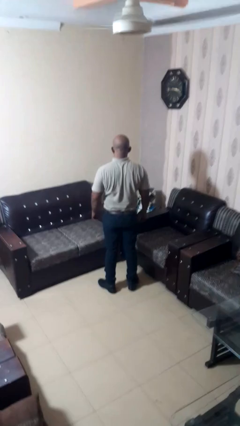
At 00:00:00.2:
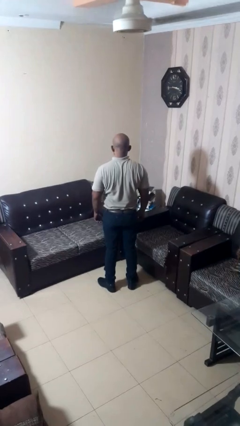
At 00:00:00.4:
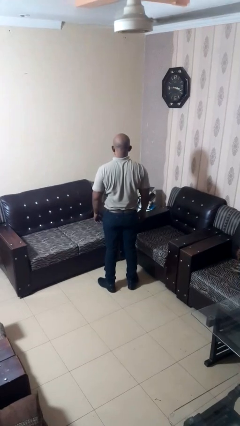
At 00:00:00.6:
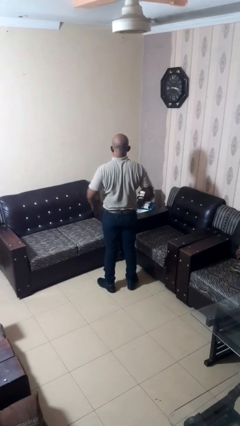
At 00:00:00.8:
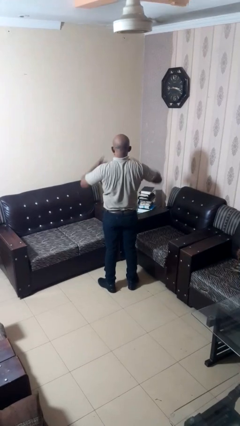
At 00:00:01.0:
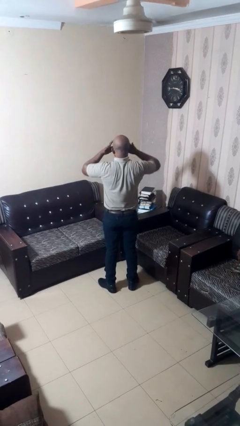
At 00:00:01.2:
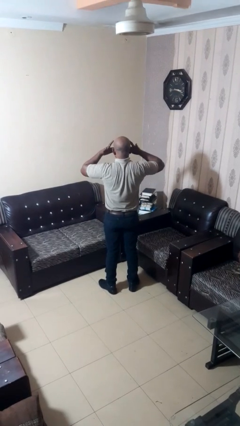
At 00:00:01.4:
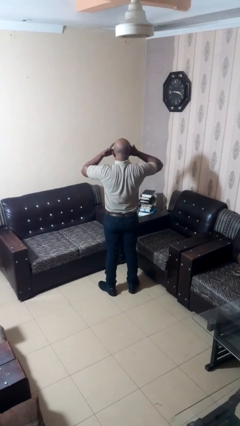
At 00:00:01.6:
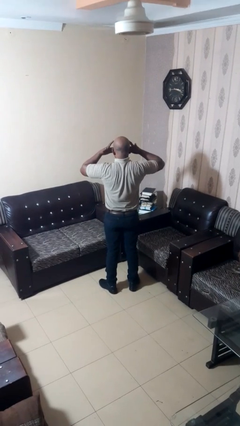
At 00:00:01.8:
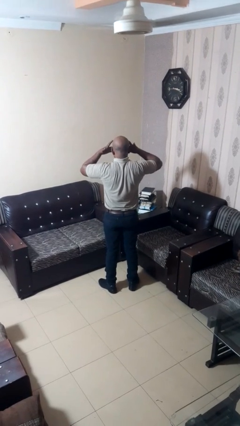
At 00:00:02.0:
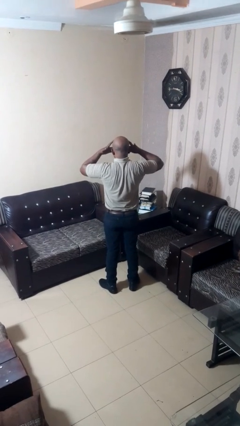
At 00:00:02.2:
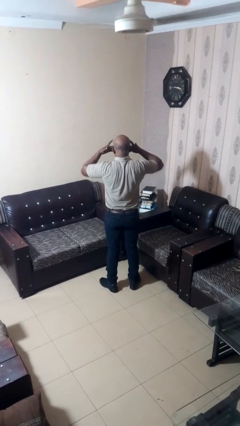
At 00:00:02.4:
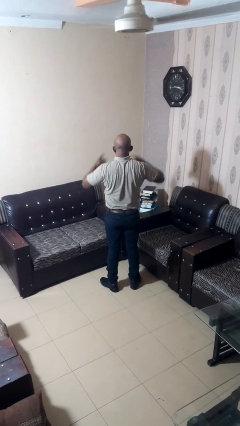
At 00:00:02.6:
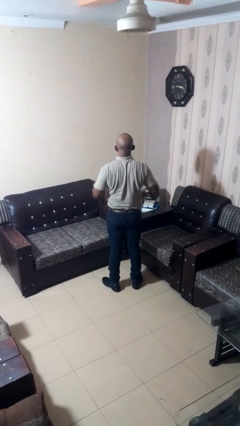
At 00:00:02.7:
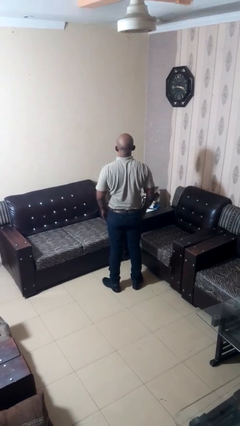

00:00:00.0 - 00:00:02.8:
person rubs eyes

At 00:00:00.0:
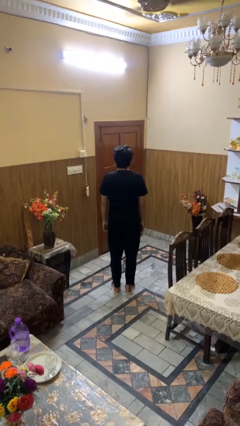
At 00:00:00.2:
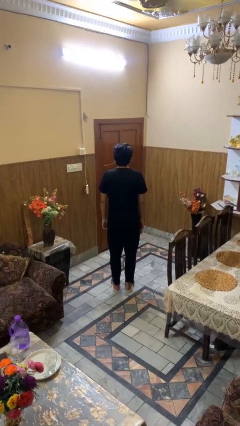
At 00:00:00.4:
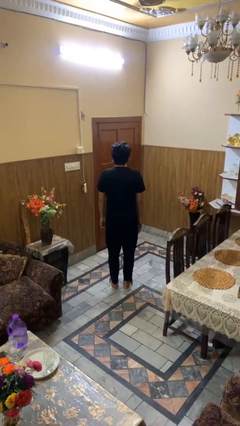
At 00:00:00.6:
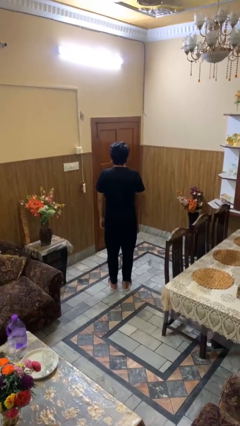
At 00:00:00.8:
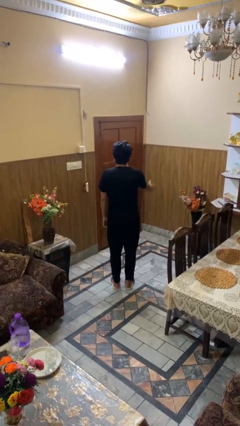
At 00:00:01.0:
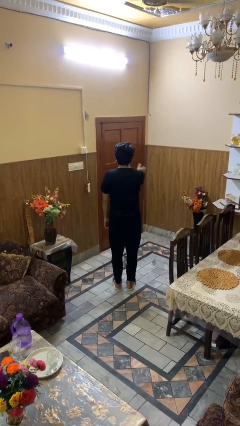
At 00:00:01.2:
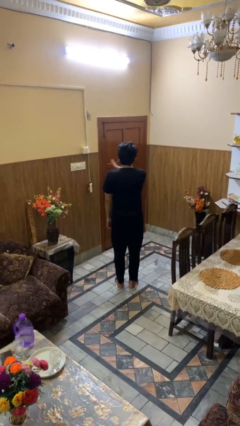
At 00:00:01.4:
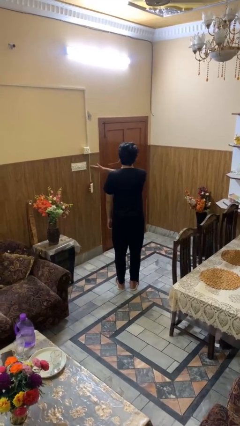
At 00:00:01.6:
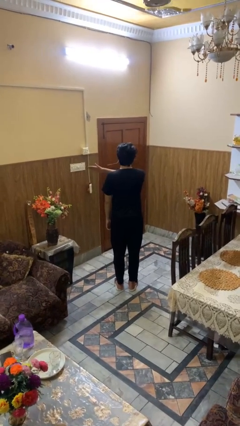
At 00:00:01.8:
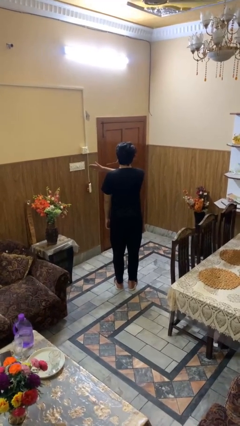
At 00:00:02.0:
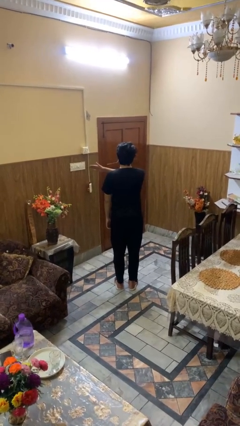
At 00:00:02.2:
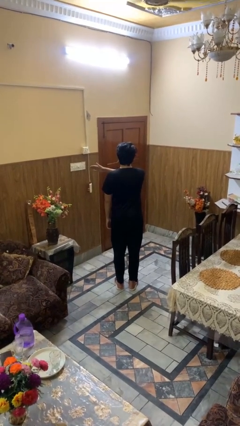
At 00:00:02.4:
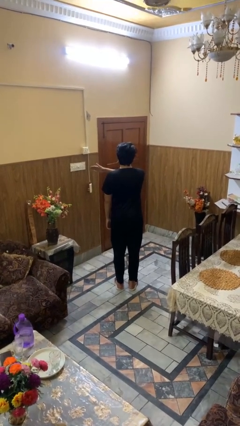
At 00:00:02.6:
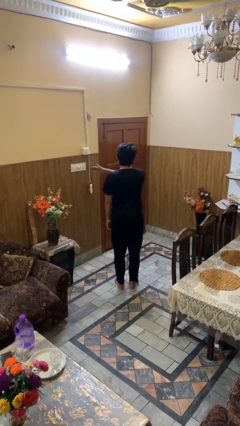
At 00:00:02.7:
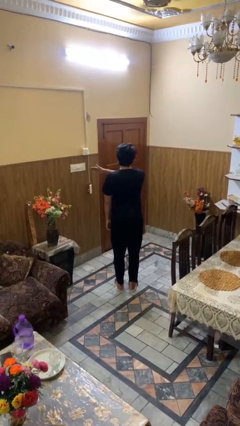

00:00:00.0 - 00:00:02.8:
person gestures swipe left

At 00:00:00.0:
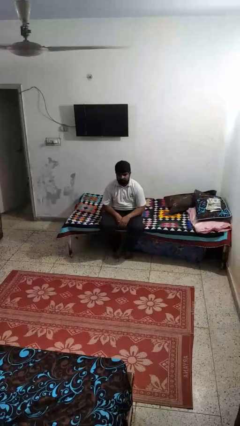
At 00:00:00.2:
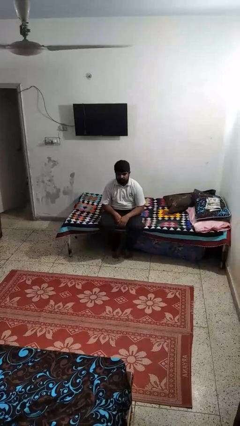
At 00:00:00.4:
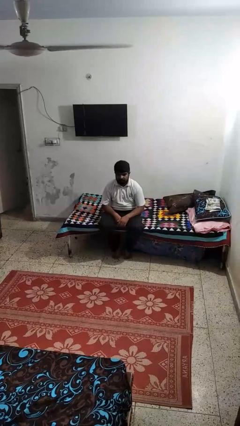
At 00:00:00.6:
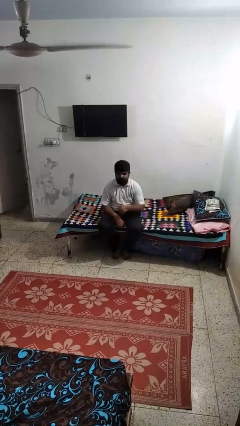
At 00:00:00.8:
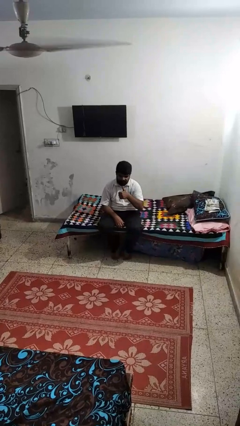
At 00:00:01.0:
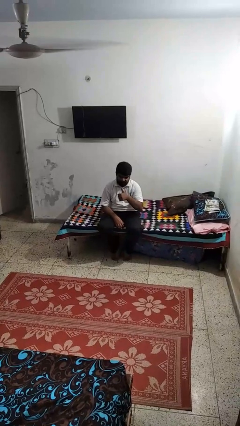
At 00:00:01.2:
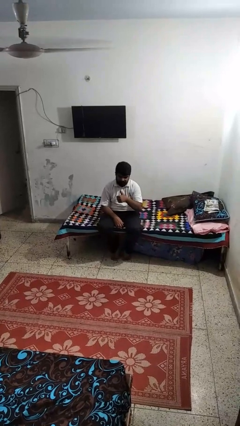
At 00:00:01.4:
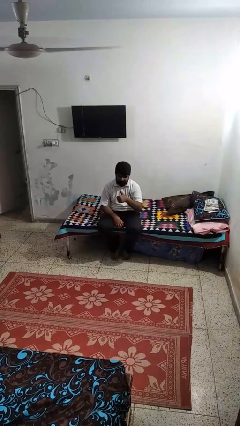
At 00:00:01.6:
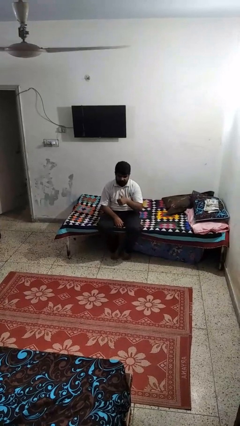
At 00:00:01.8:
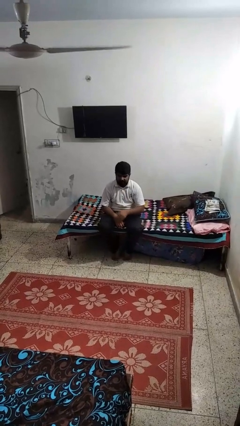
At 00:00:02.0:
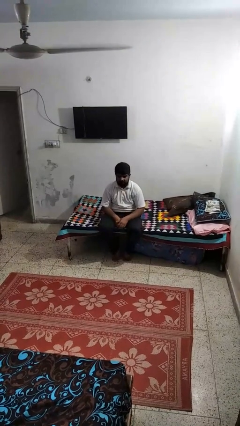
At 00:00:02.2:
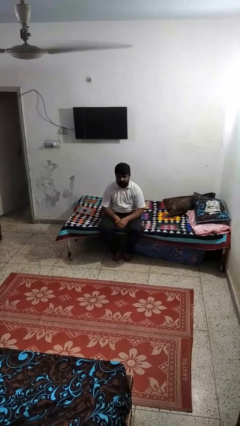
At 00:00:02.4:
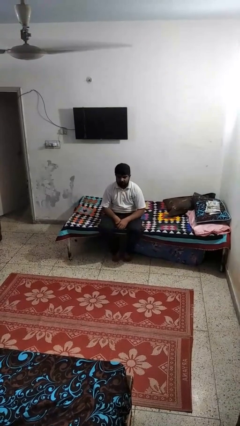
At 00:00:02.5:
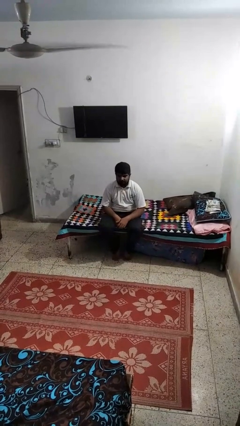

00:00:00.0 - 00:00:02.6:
person gestures thumbs up

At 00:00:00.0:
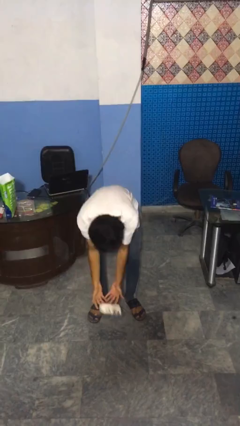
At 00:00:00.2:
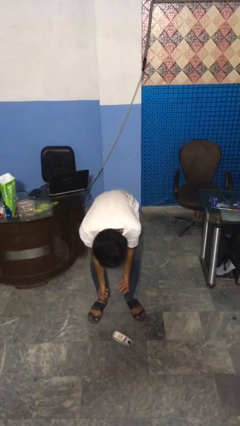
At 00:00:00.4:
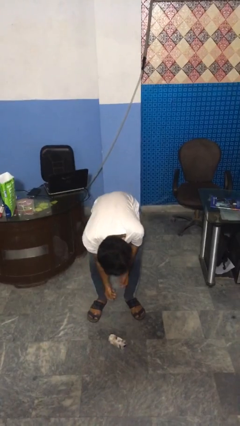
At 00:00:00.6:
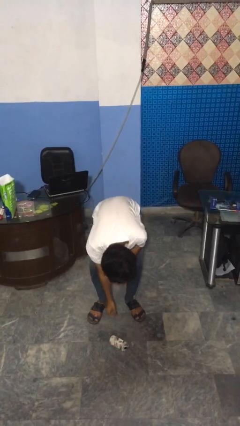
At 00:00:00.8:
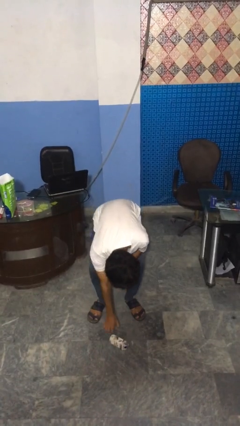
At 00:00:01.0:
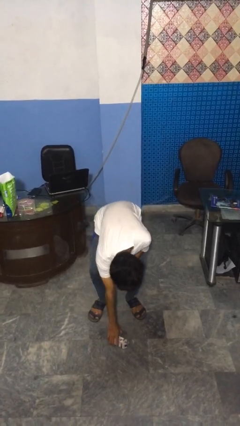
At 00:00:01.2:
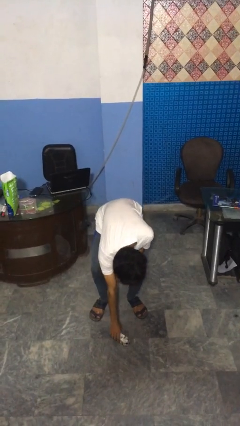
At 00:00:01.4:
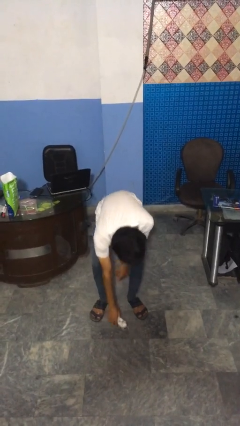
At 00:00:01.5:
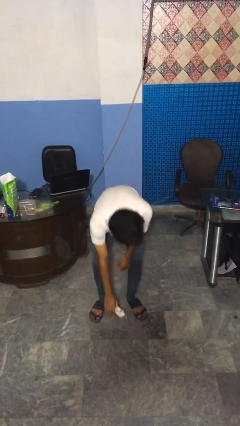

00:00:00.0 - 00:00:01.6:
person catches dropped object

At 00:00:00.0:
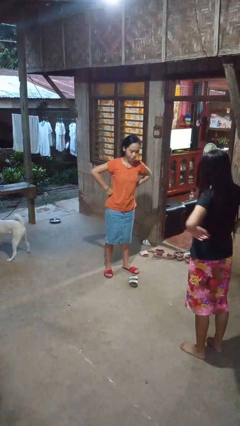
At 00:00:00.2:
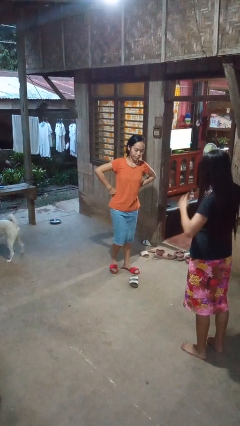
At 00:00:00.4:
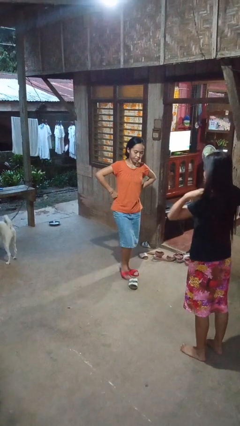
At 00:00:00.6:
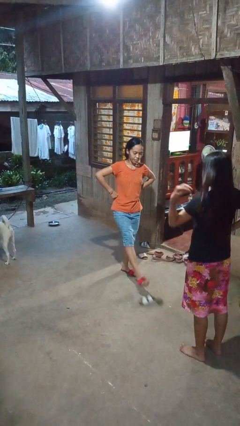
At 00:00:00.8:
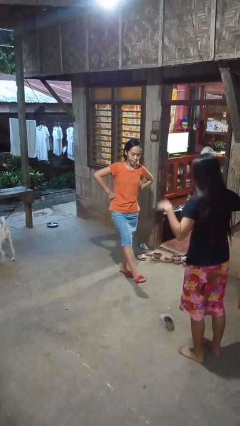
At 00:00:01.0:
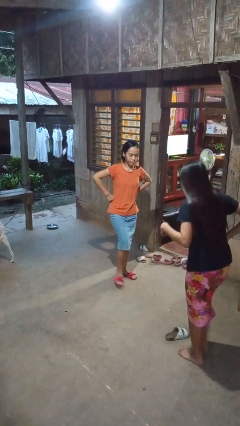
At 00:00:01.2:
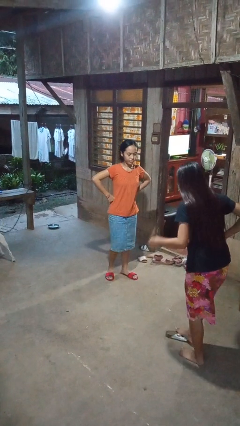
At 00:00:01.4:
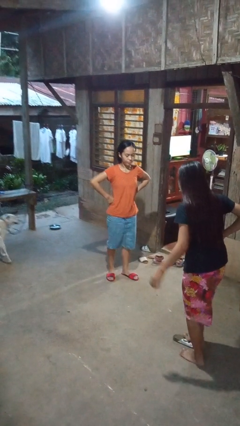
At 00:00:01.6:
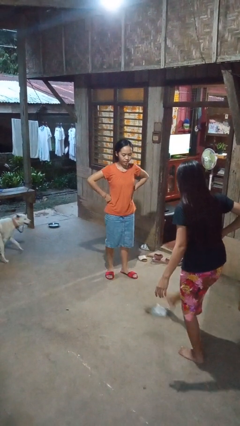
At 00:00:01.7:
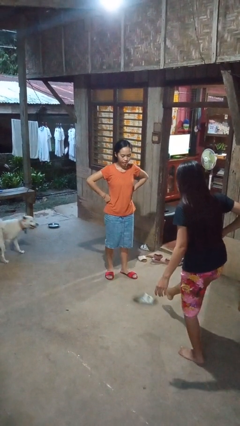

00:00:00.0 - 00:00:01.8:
person kicks object to person

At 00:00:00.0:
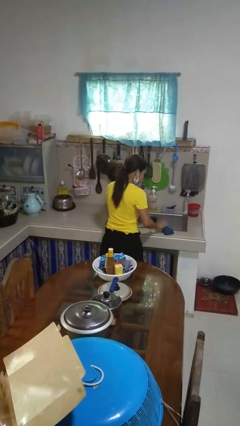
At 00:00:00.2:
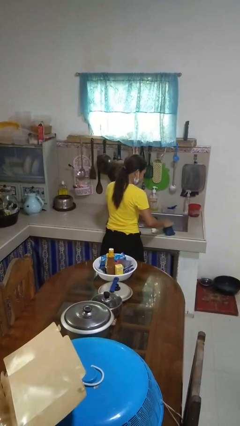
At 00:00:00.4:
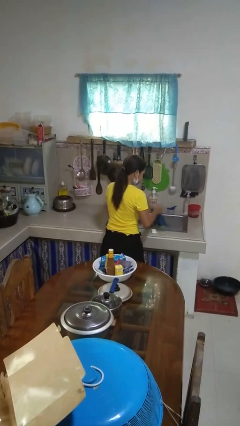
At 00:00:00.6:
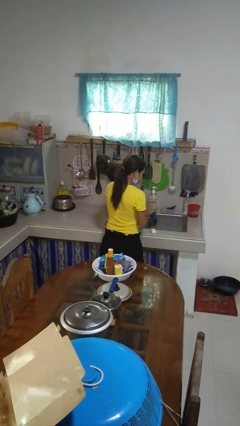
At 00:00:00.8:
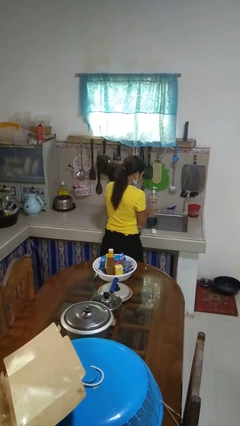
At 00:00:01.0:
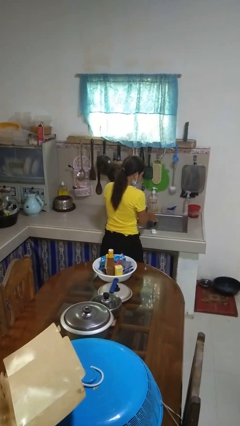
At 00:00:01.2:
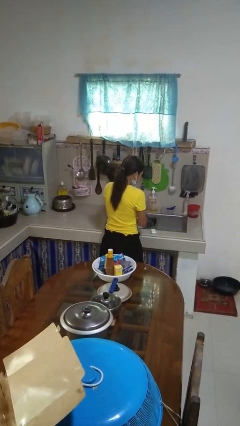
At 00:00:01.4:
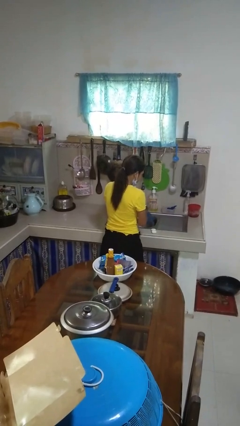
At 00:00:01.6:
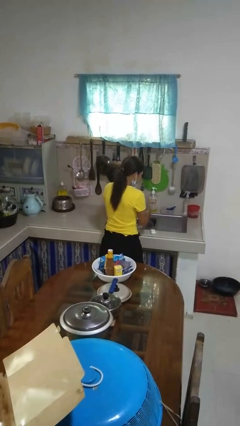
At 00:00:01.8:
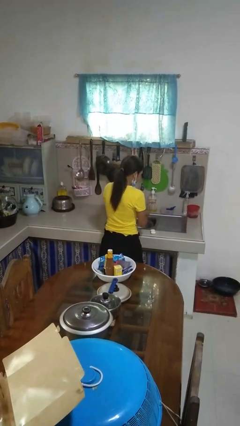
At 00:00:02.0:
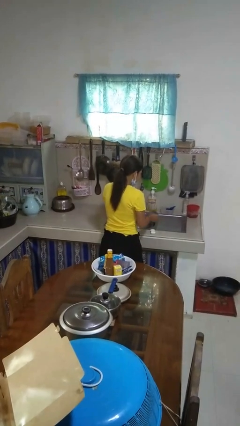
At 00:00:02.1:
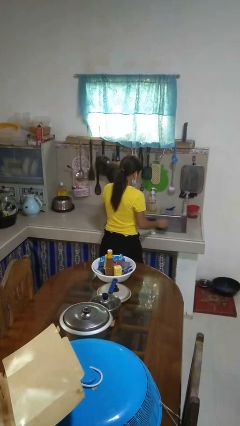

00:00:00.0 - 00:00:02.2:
person dries hands with towel

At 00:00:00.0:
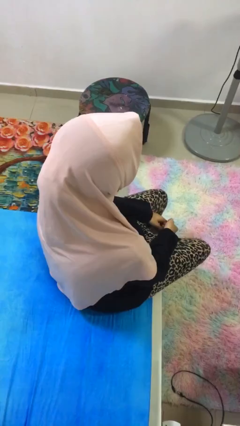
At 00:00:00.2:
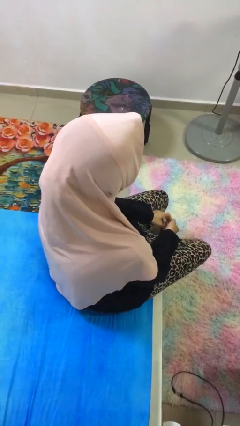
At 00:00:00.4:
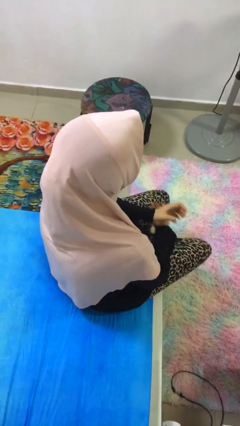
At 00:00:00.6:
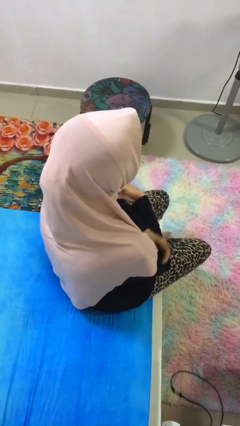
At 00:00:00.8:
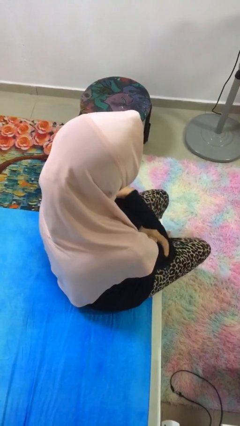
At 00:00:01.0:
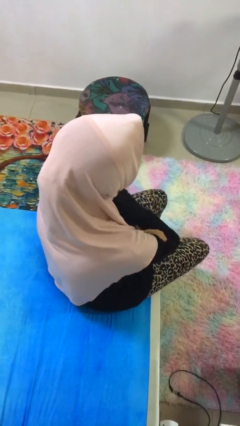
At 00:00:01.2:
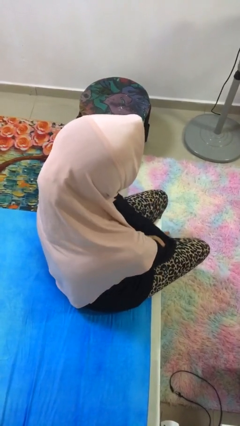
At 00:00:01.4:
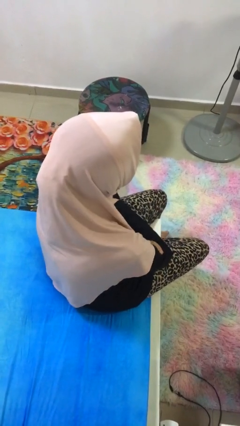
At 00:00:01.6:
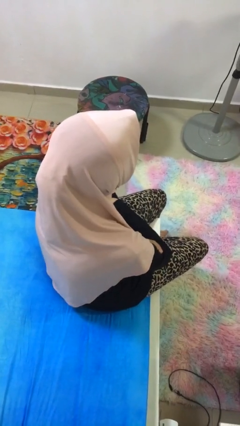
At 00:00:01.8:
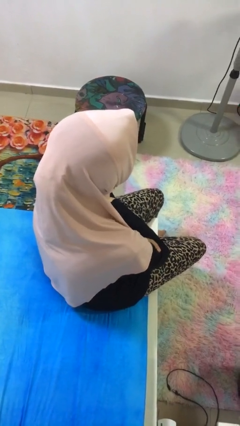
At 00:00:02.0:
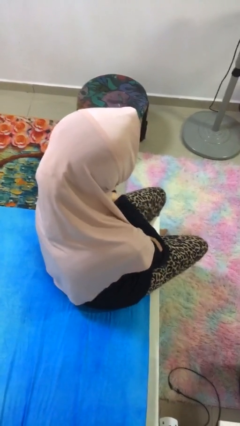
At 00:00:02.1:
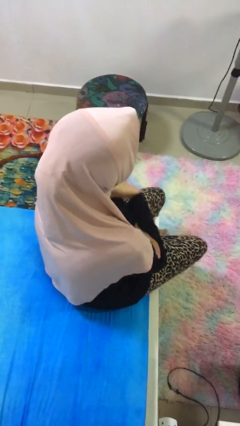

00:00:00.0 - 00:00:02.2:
person crosses arms

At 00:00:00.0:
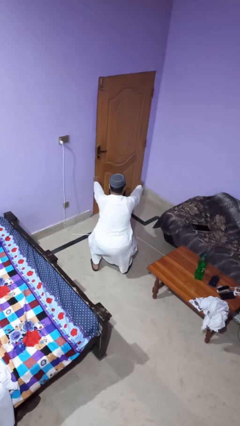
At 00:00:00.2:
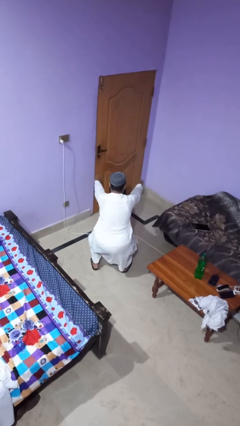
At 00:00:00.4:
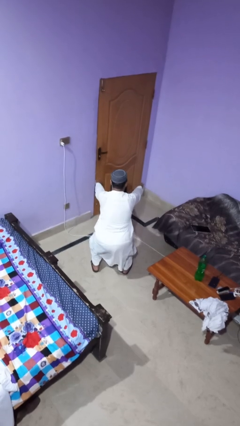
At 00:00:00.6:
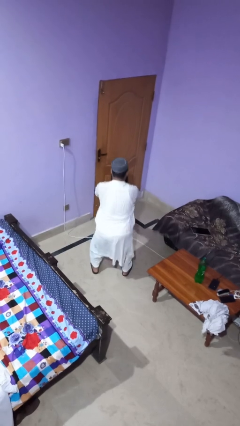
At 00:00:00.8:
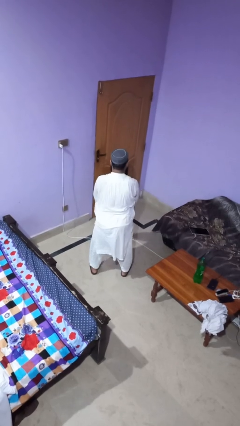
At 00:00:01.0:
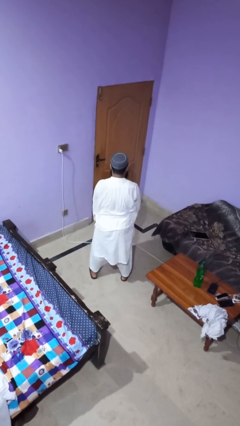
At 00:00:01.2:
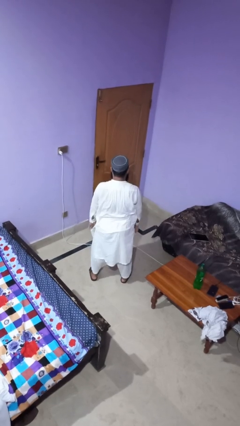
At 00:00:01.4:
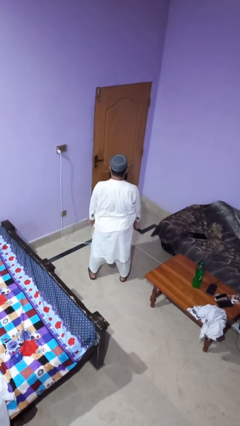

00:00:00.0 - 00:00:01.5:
person stands up
